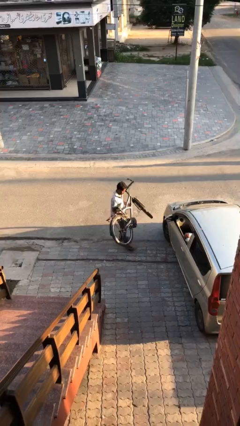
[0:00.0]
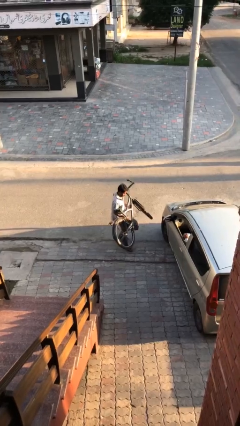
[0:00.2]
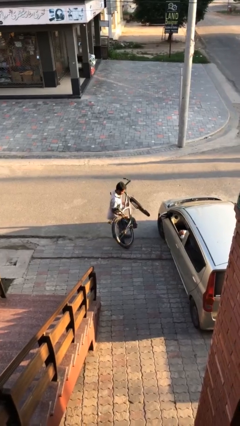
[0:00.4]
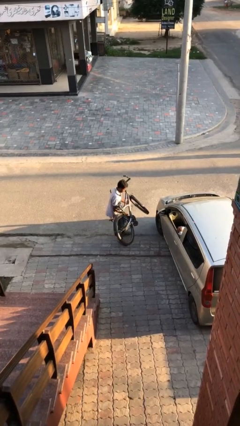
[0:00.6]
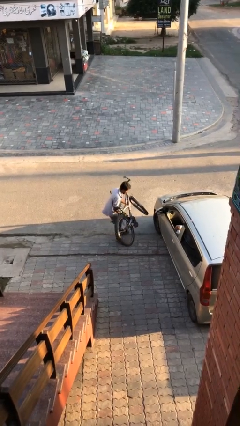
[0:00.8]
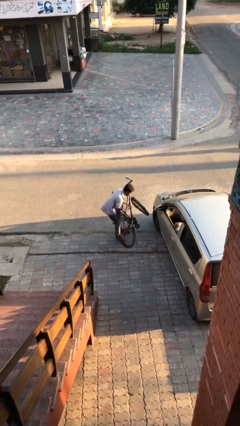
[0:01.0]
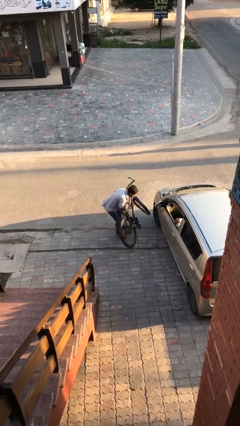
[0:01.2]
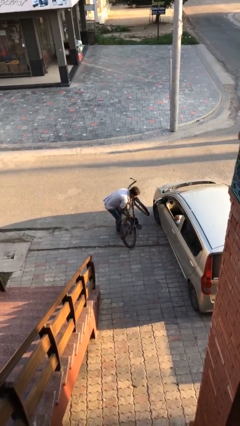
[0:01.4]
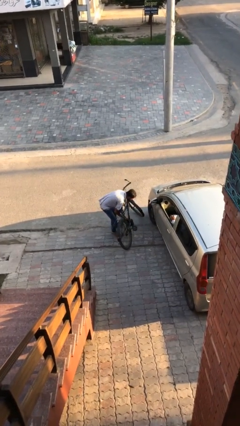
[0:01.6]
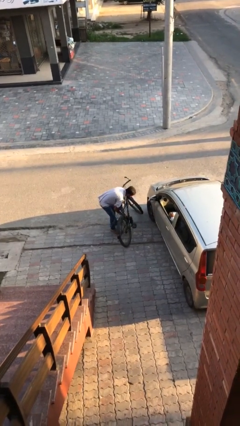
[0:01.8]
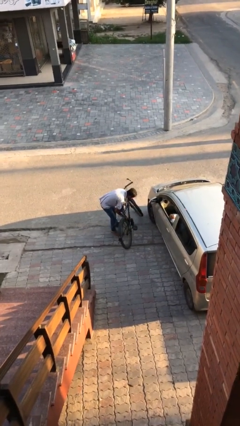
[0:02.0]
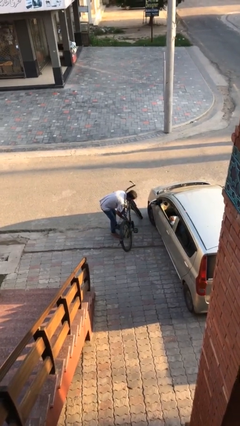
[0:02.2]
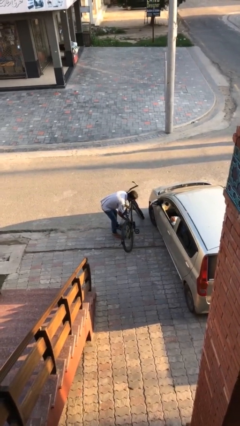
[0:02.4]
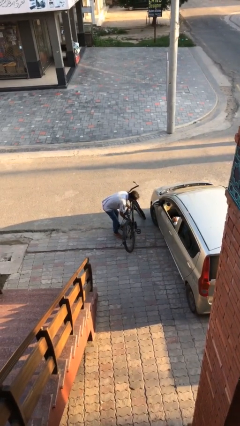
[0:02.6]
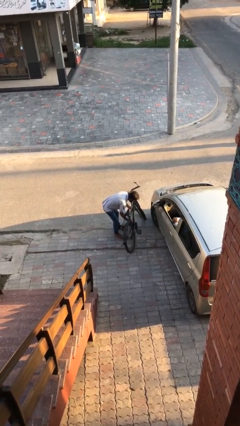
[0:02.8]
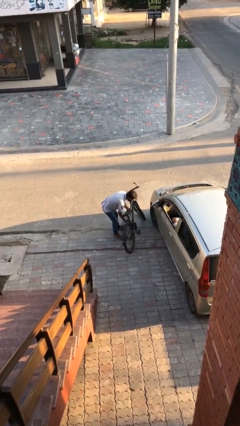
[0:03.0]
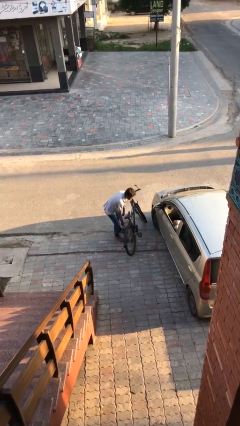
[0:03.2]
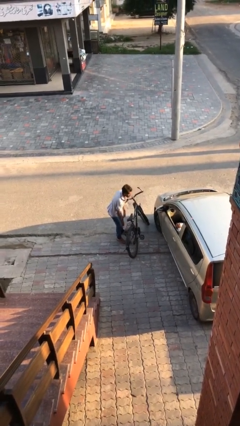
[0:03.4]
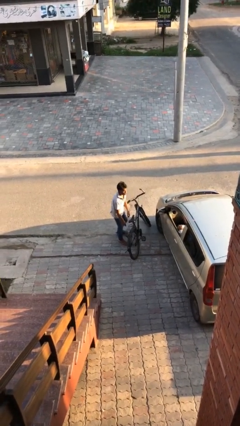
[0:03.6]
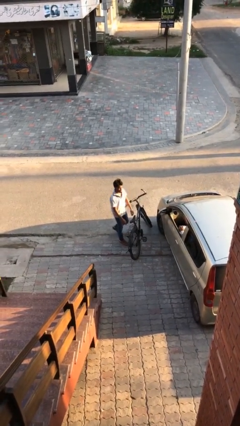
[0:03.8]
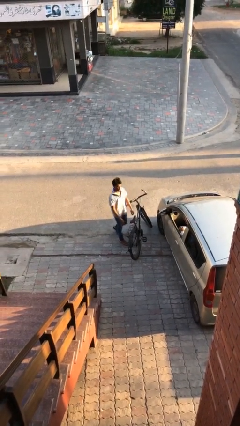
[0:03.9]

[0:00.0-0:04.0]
person puts down object on floor

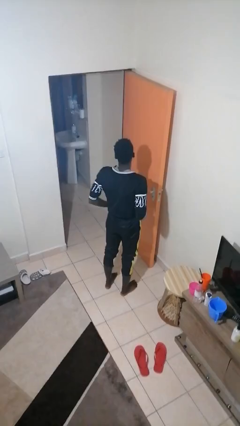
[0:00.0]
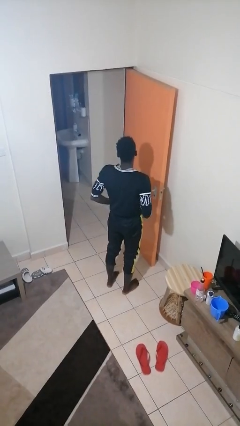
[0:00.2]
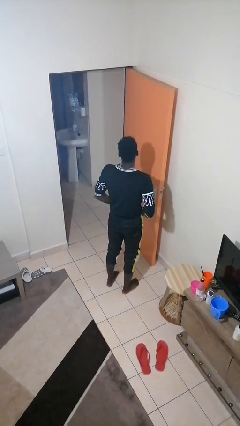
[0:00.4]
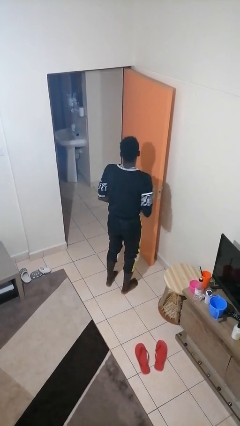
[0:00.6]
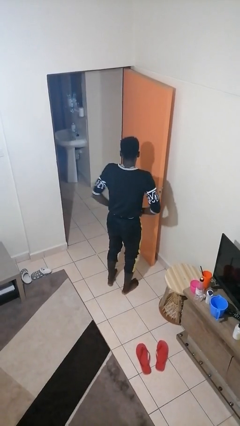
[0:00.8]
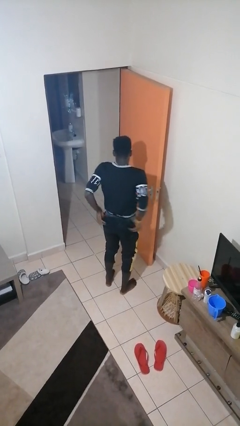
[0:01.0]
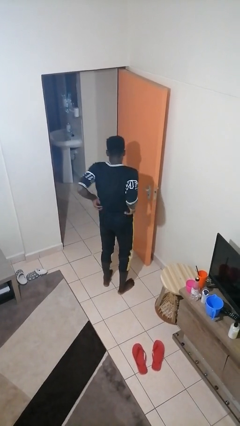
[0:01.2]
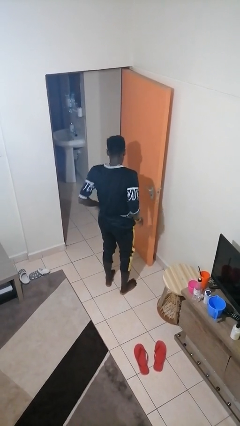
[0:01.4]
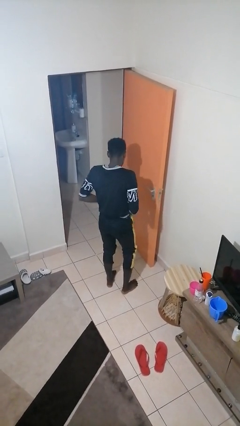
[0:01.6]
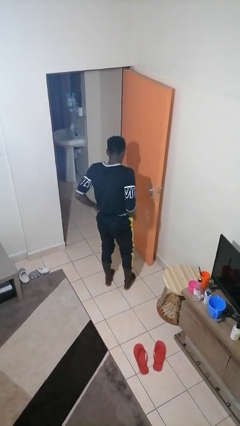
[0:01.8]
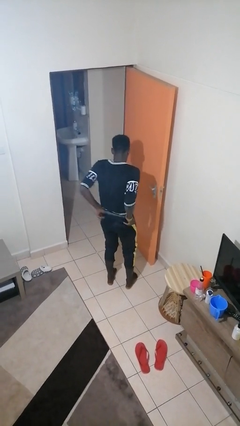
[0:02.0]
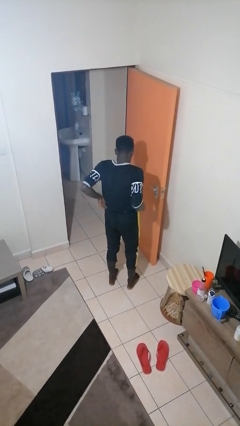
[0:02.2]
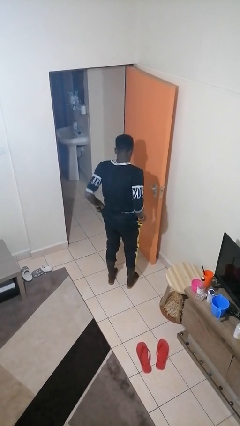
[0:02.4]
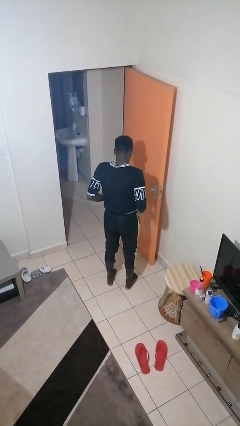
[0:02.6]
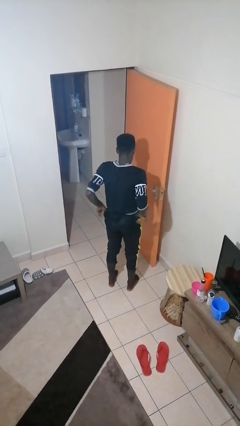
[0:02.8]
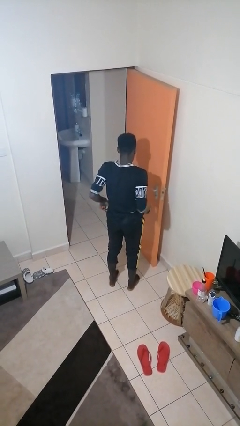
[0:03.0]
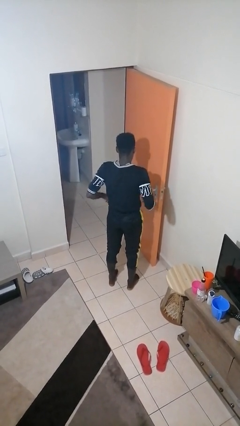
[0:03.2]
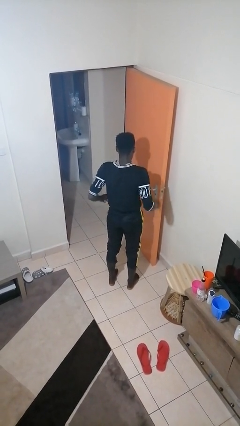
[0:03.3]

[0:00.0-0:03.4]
person hikes up pants

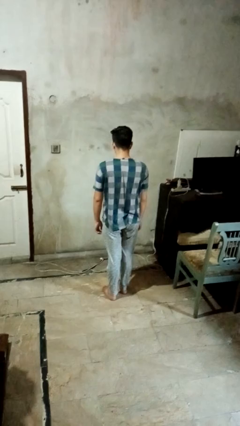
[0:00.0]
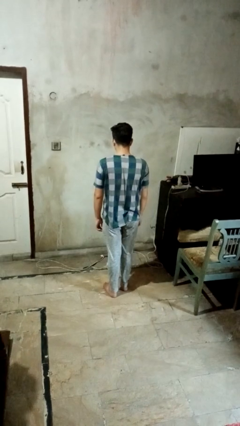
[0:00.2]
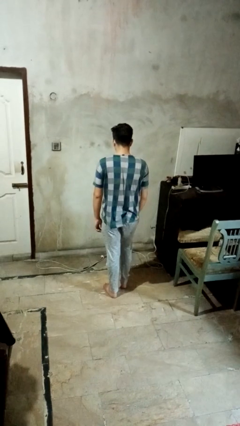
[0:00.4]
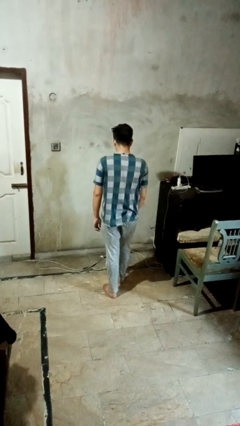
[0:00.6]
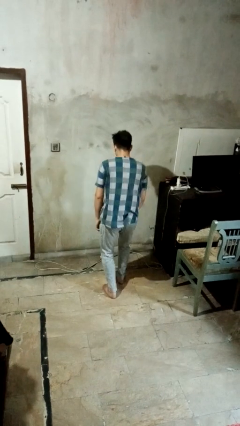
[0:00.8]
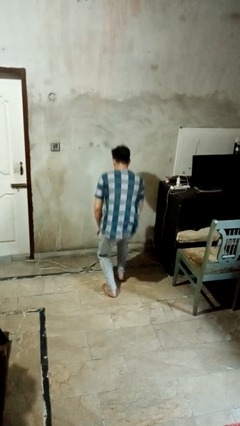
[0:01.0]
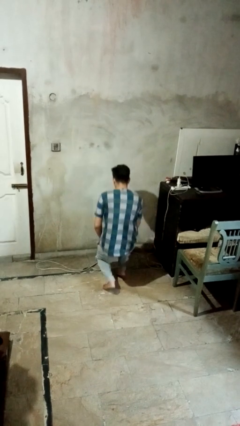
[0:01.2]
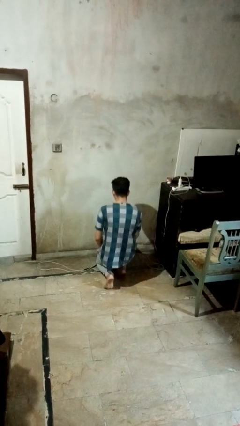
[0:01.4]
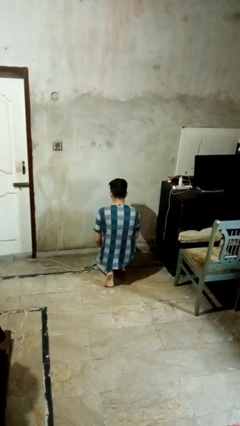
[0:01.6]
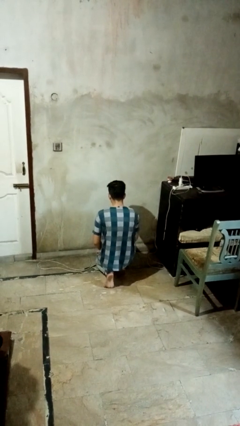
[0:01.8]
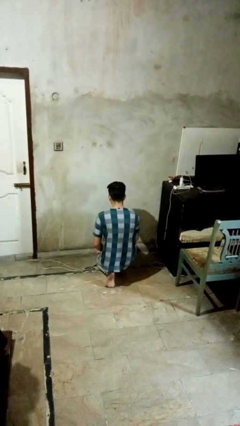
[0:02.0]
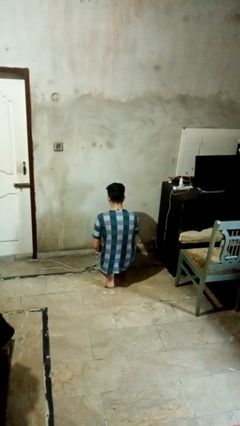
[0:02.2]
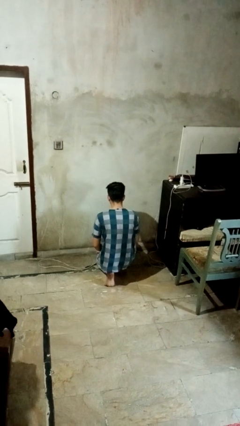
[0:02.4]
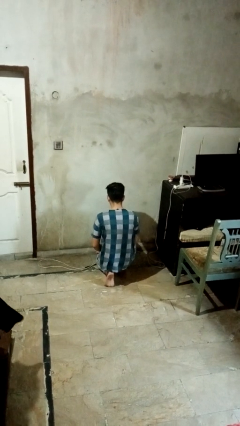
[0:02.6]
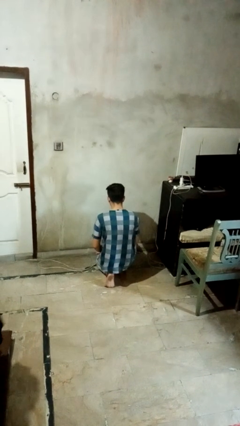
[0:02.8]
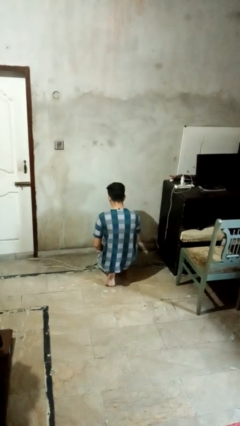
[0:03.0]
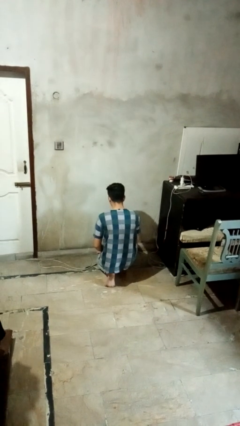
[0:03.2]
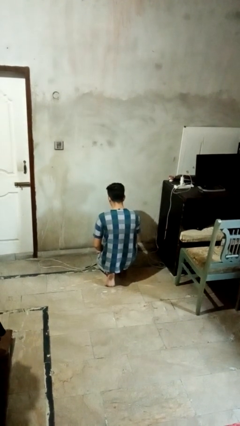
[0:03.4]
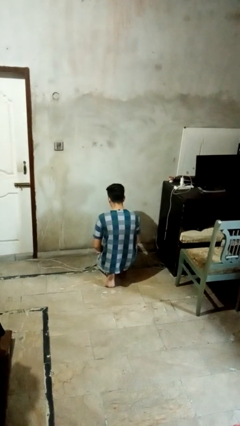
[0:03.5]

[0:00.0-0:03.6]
person kneels

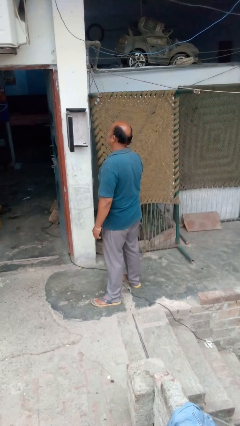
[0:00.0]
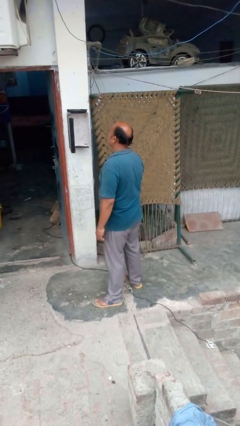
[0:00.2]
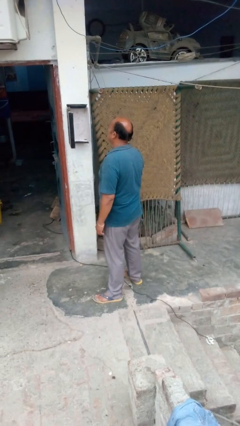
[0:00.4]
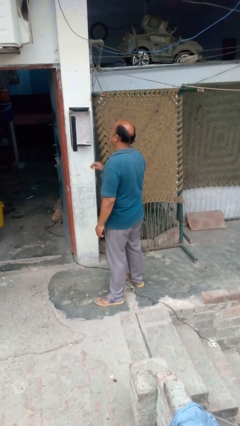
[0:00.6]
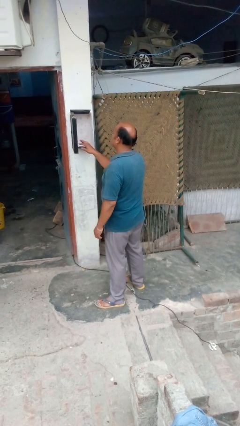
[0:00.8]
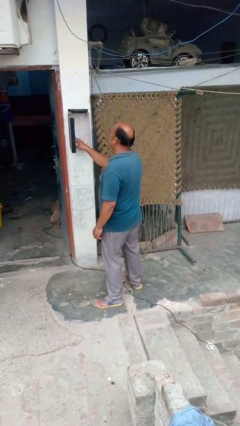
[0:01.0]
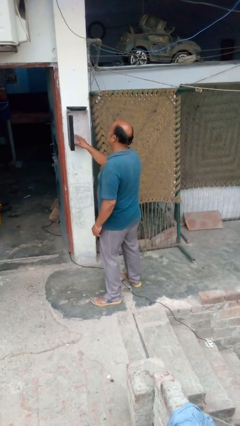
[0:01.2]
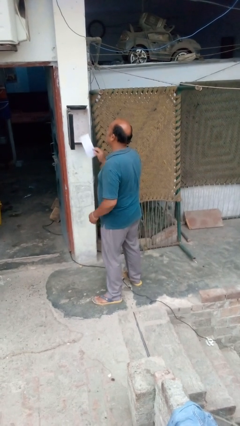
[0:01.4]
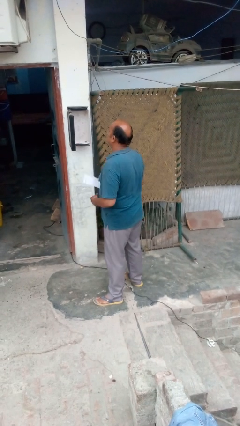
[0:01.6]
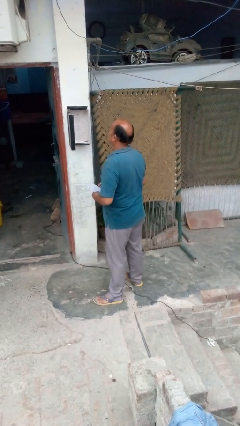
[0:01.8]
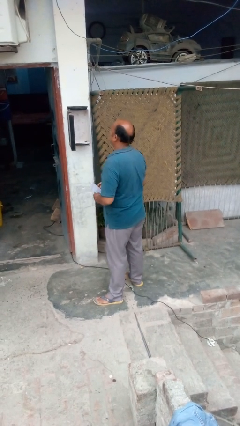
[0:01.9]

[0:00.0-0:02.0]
person takes letters from mailbox

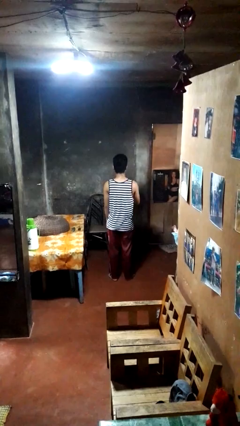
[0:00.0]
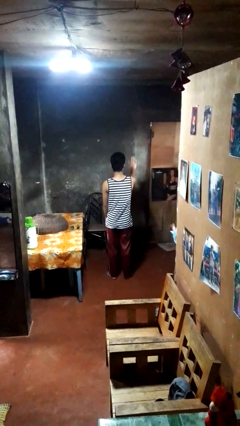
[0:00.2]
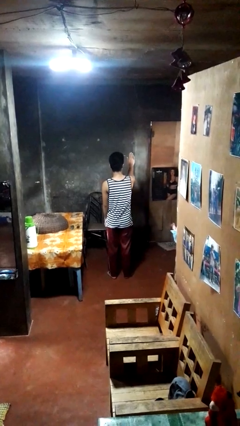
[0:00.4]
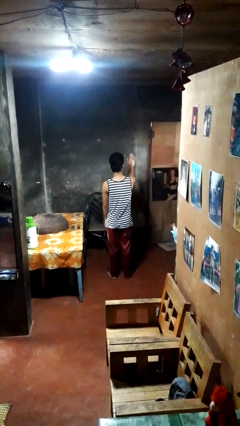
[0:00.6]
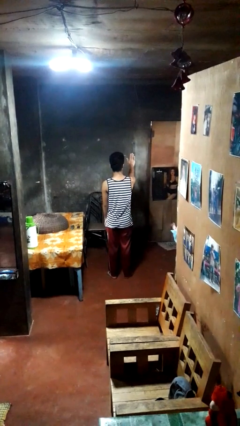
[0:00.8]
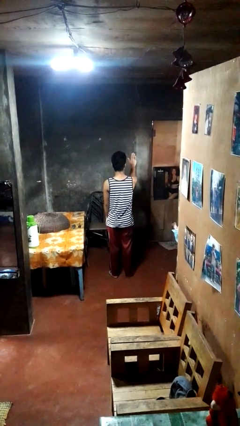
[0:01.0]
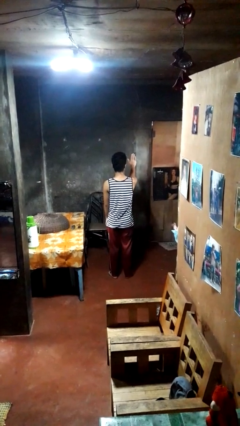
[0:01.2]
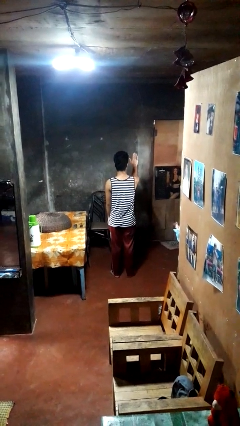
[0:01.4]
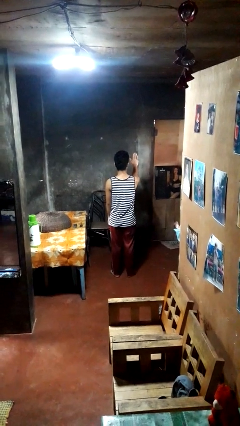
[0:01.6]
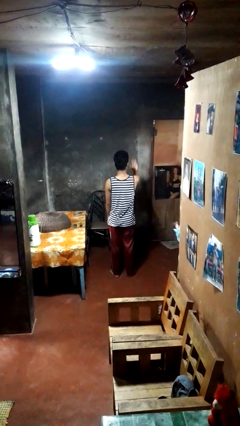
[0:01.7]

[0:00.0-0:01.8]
person gestures stop

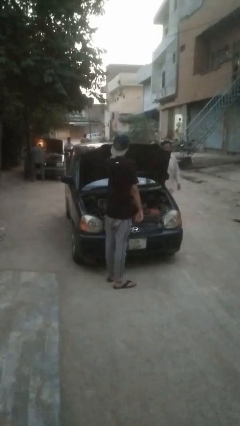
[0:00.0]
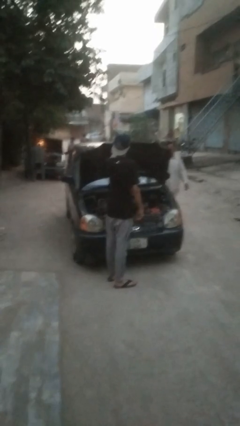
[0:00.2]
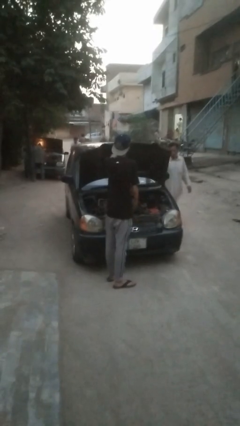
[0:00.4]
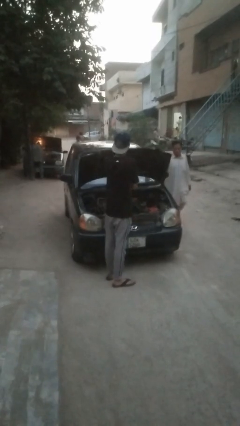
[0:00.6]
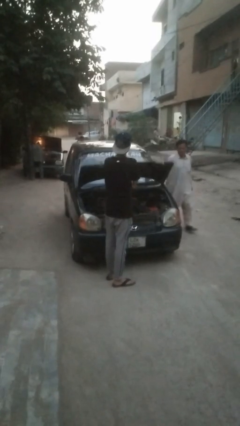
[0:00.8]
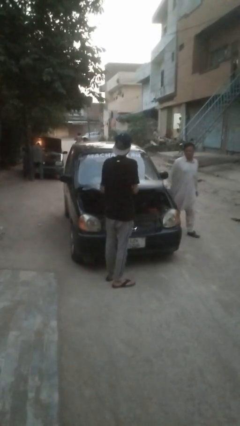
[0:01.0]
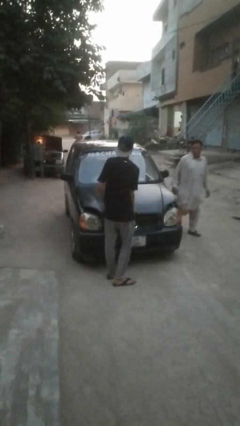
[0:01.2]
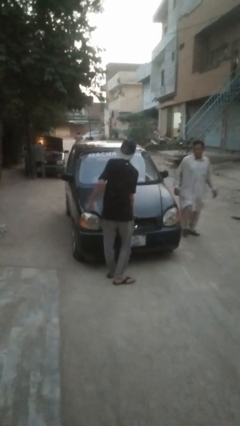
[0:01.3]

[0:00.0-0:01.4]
person closes car hood

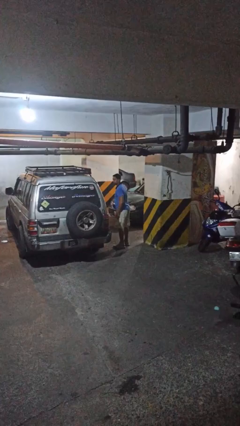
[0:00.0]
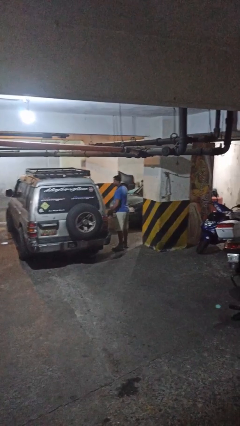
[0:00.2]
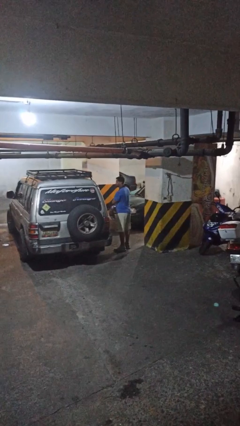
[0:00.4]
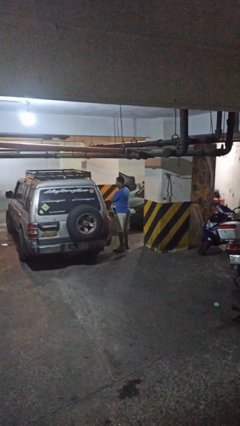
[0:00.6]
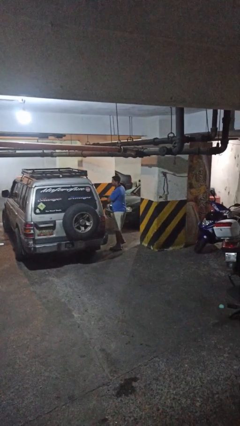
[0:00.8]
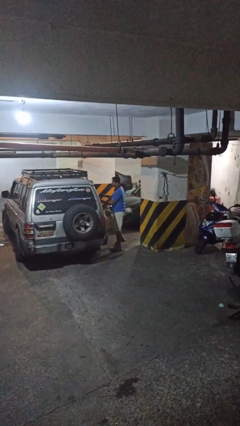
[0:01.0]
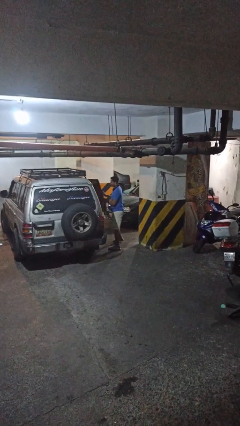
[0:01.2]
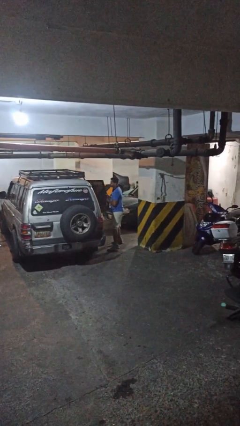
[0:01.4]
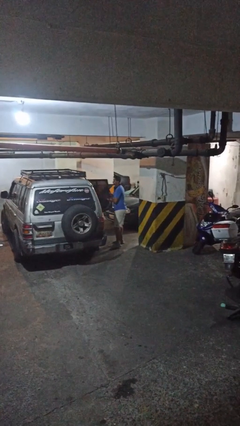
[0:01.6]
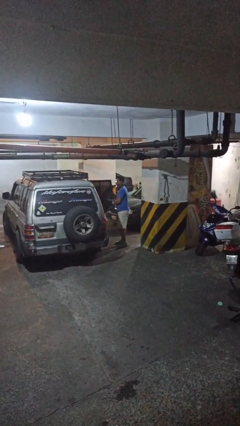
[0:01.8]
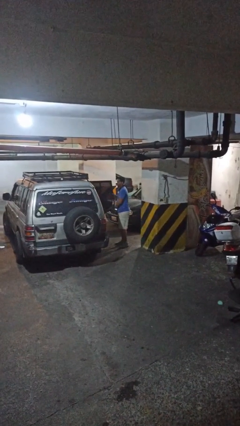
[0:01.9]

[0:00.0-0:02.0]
person opens car door
